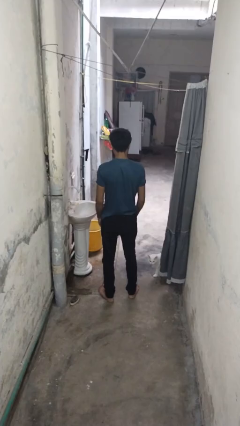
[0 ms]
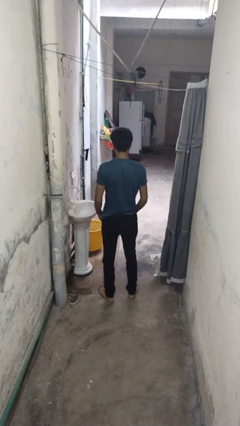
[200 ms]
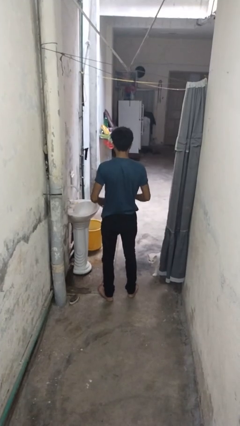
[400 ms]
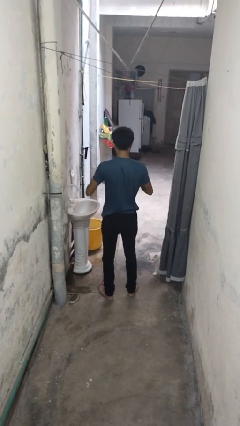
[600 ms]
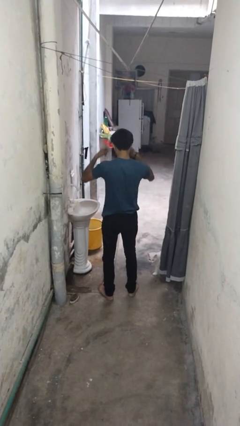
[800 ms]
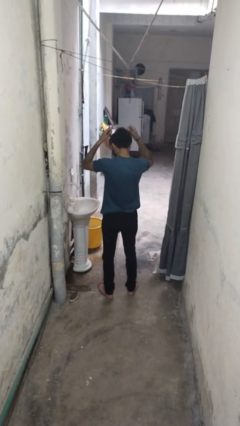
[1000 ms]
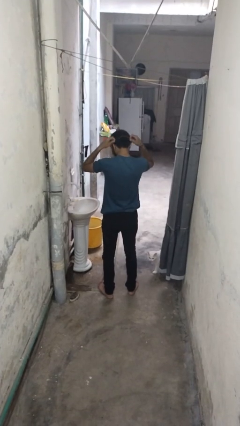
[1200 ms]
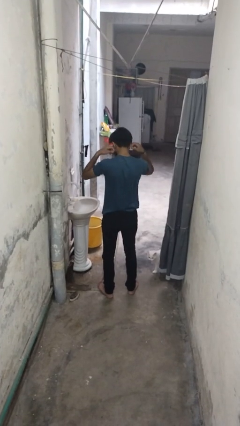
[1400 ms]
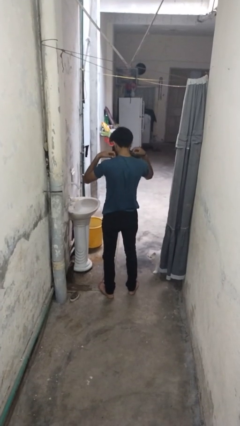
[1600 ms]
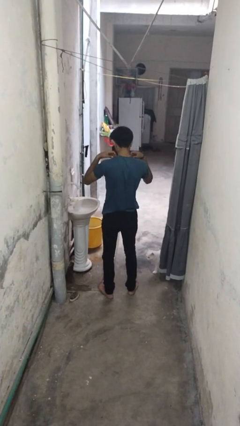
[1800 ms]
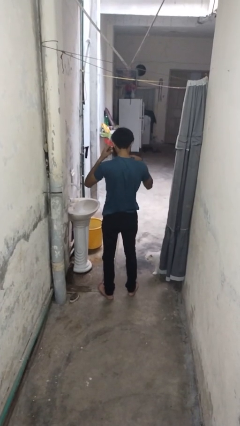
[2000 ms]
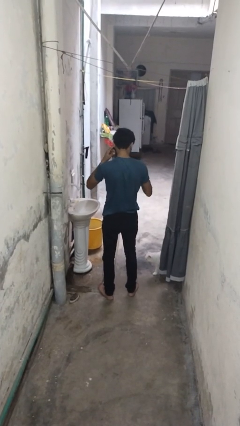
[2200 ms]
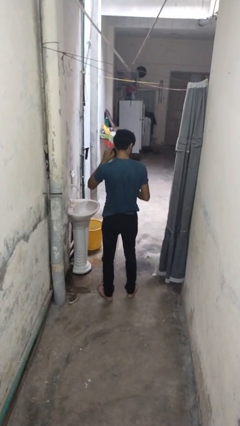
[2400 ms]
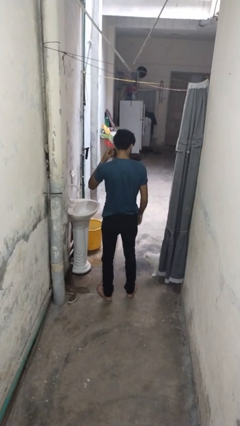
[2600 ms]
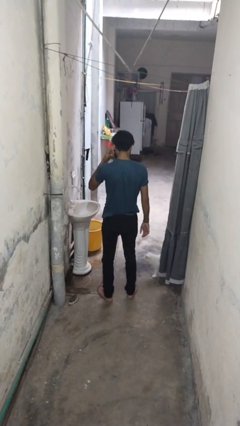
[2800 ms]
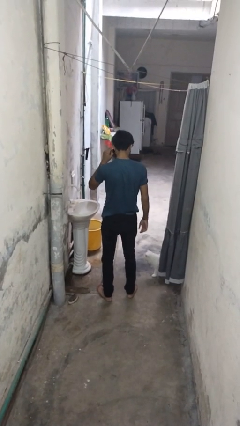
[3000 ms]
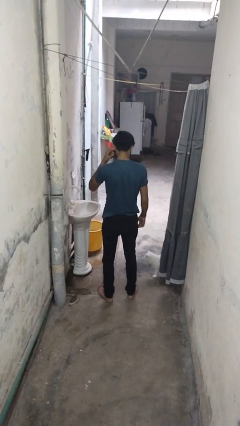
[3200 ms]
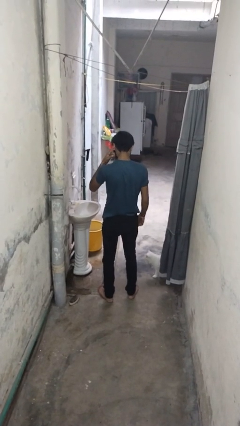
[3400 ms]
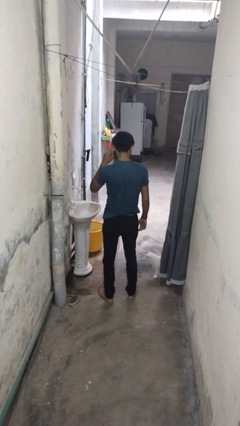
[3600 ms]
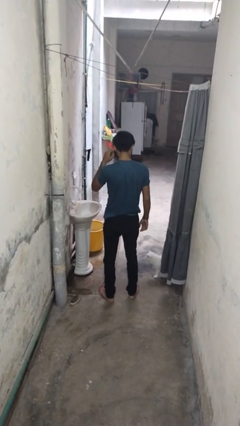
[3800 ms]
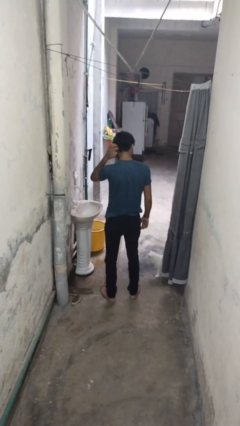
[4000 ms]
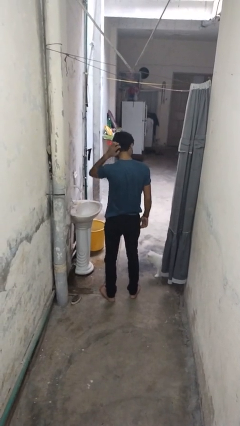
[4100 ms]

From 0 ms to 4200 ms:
person puts on necklace

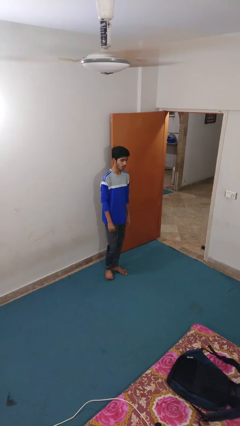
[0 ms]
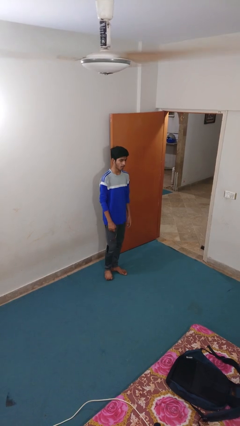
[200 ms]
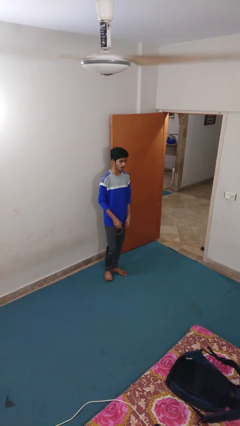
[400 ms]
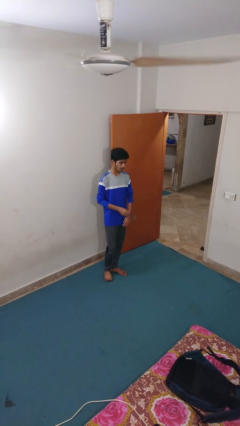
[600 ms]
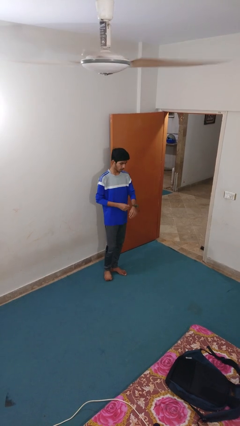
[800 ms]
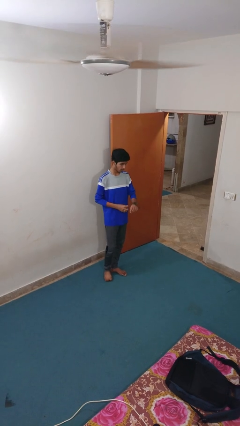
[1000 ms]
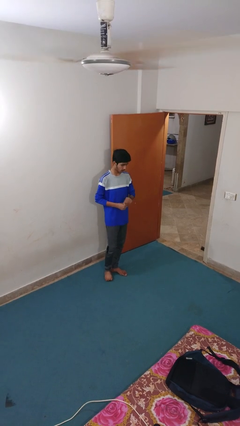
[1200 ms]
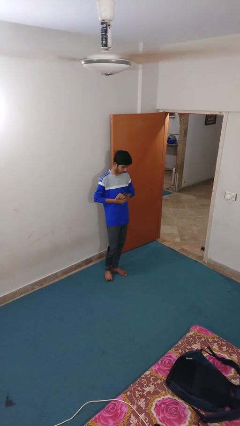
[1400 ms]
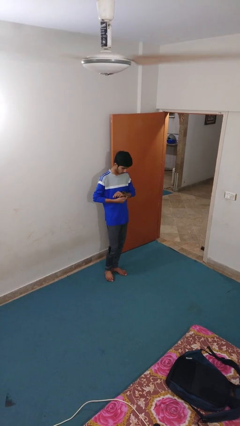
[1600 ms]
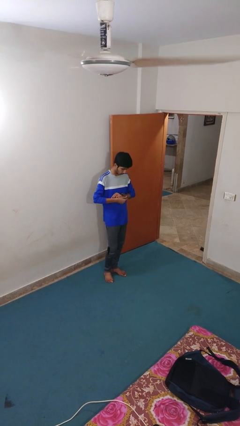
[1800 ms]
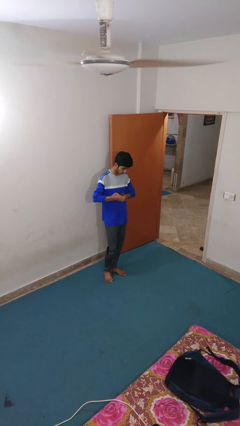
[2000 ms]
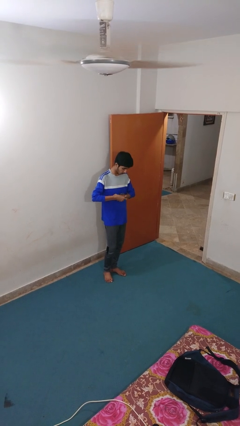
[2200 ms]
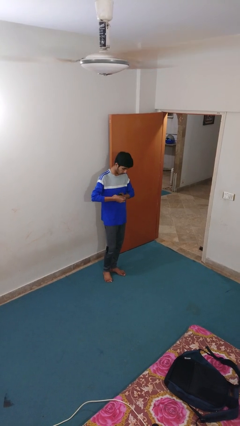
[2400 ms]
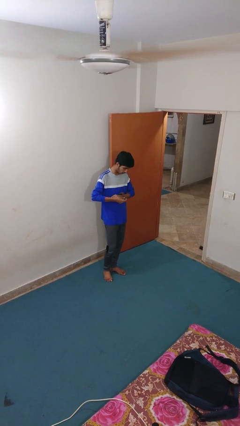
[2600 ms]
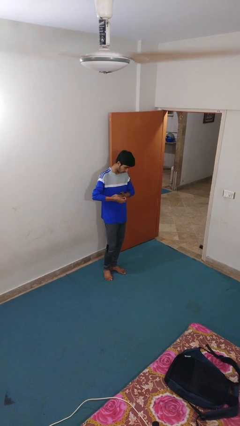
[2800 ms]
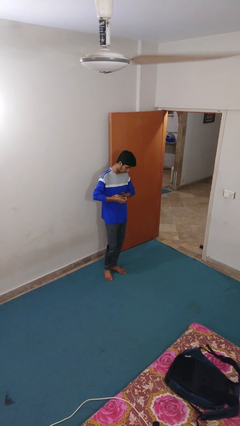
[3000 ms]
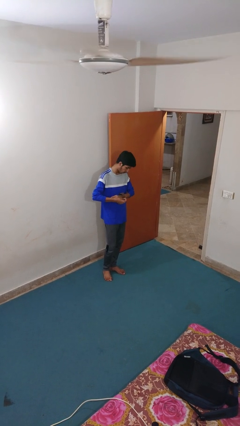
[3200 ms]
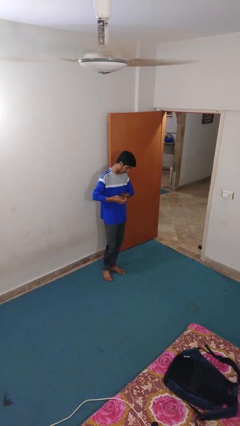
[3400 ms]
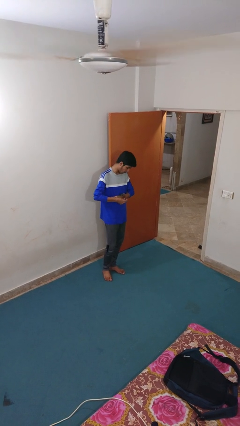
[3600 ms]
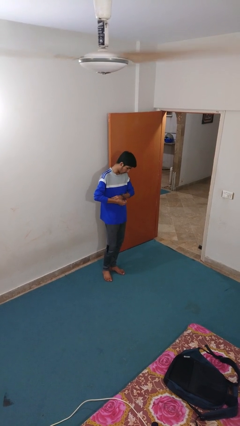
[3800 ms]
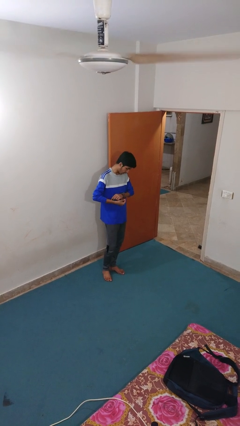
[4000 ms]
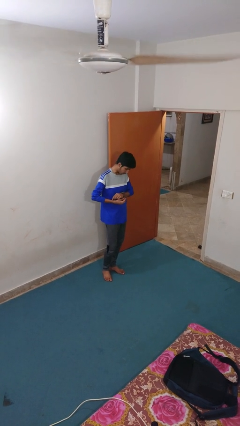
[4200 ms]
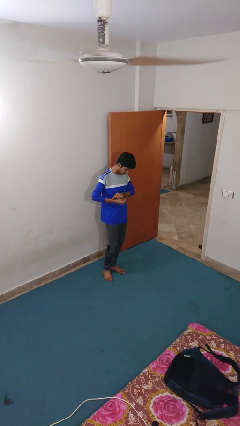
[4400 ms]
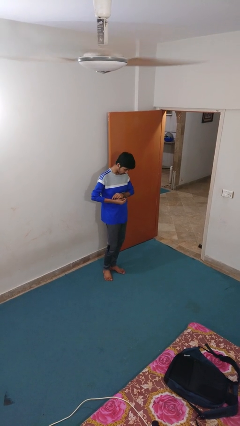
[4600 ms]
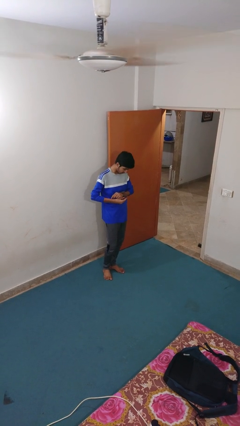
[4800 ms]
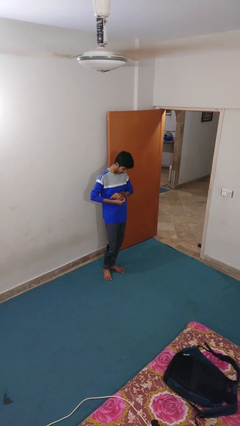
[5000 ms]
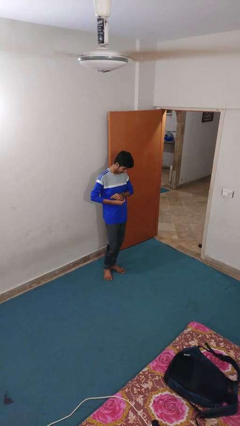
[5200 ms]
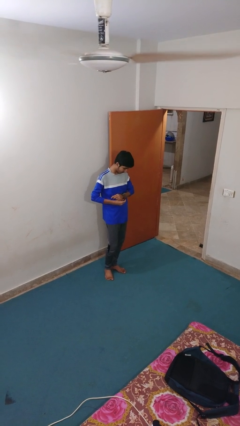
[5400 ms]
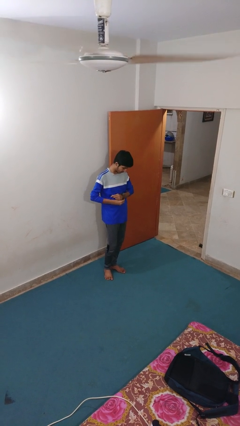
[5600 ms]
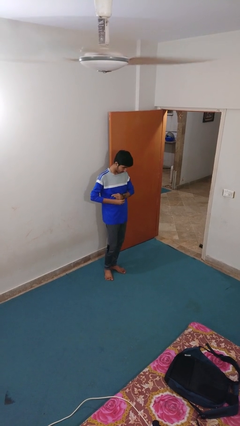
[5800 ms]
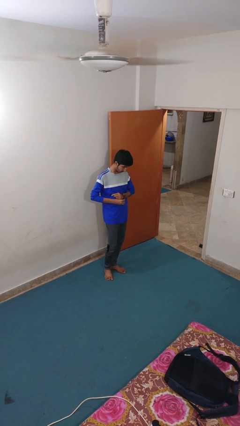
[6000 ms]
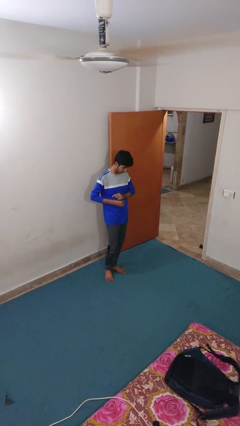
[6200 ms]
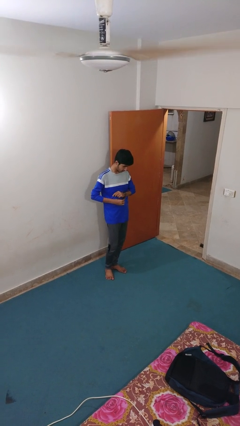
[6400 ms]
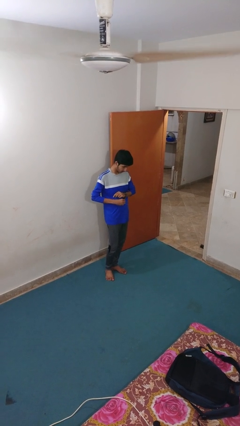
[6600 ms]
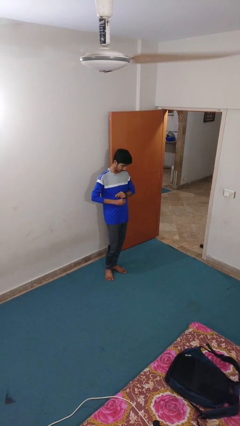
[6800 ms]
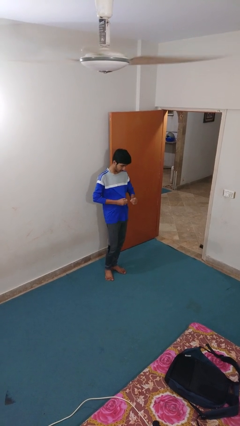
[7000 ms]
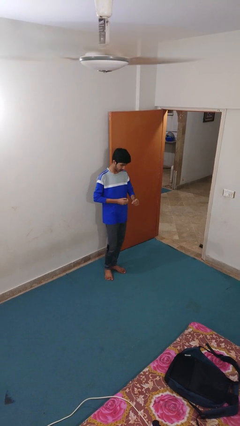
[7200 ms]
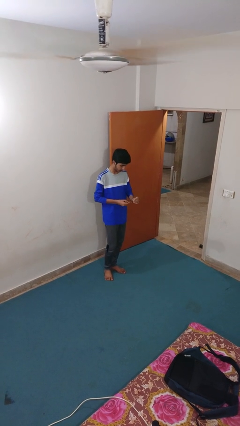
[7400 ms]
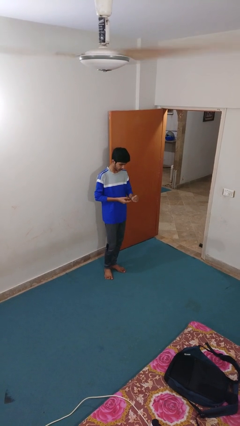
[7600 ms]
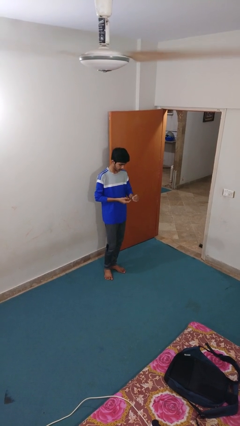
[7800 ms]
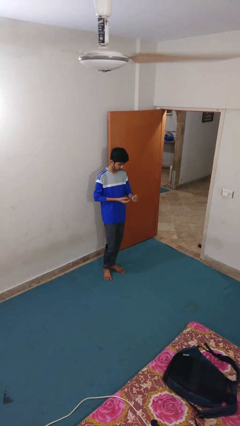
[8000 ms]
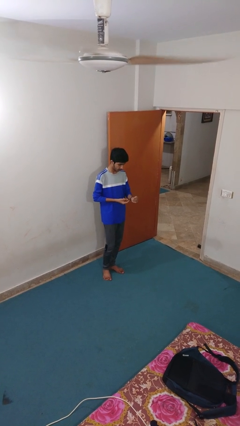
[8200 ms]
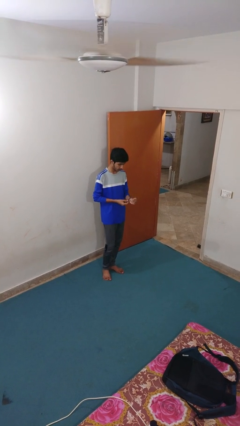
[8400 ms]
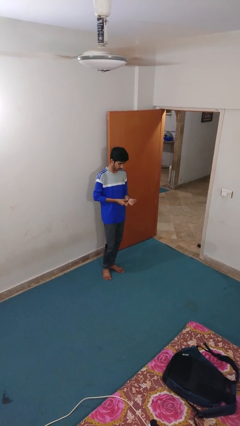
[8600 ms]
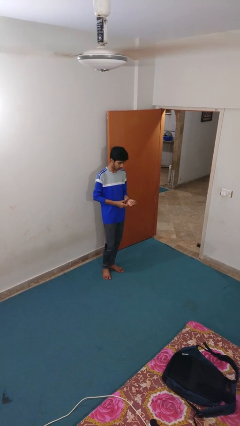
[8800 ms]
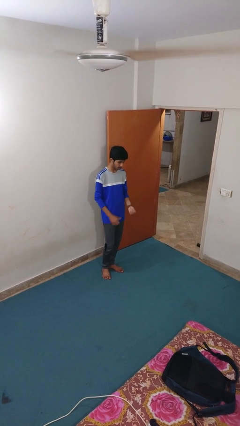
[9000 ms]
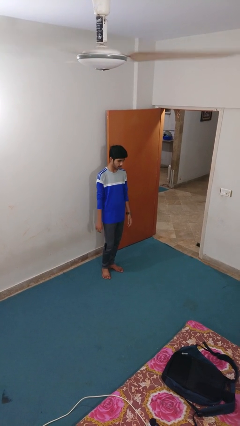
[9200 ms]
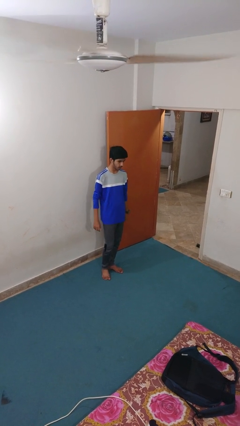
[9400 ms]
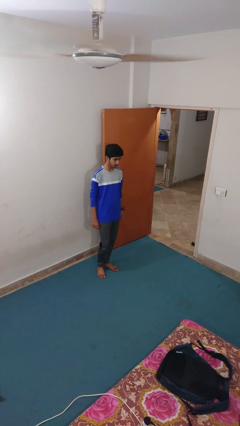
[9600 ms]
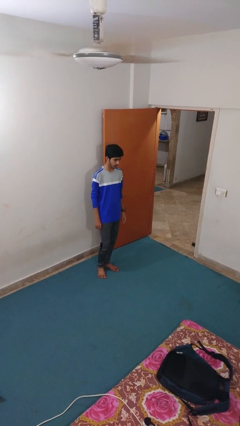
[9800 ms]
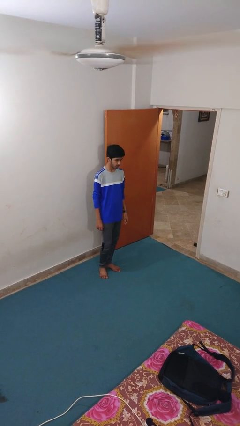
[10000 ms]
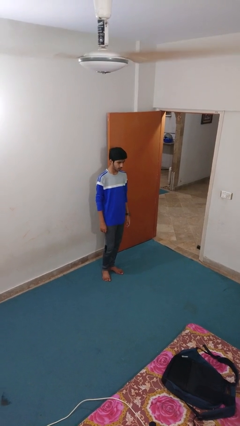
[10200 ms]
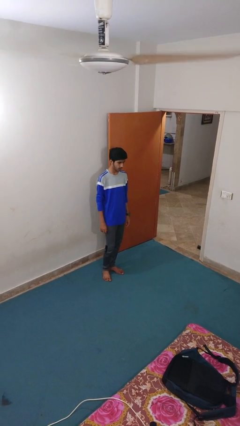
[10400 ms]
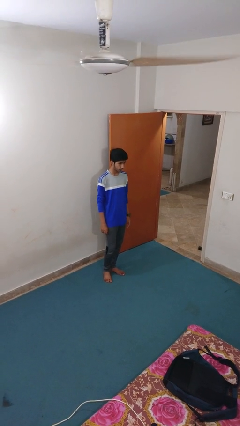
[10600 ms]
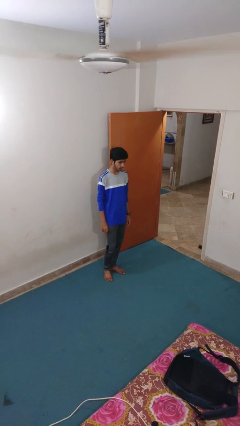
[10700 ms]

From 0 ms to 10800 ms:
person puts on wristwatch

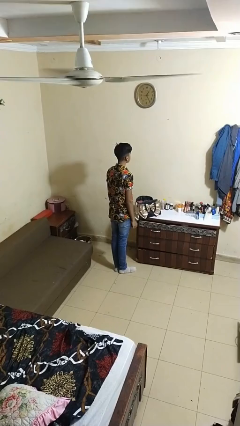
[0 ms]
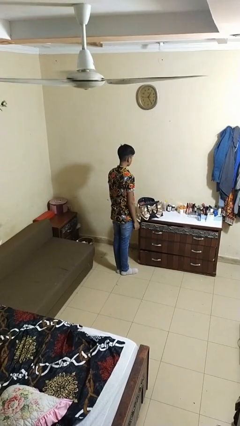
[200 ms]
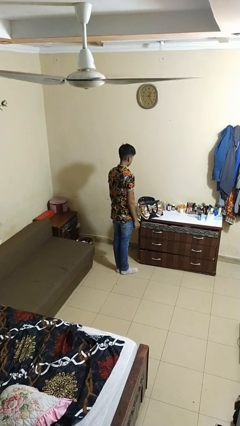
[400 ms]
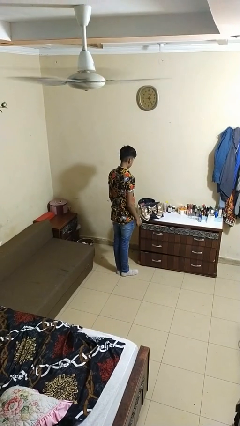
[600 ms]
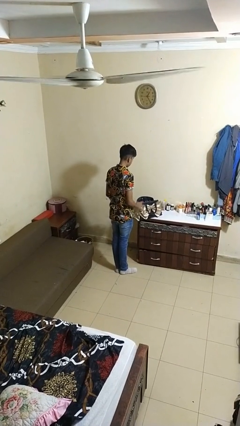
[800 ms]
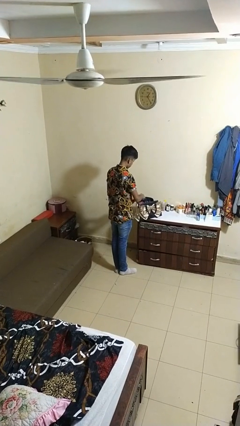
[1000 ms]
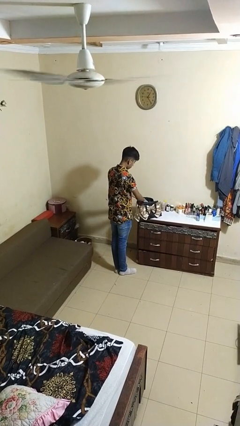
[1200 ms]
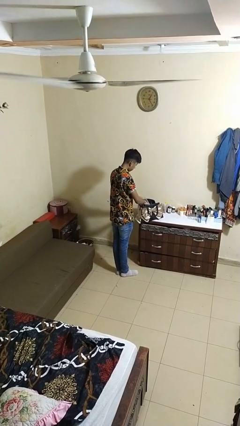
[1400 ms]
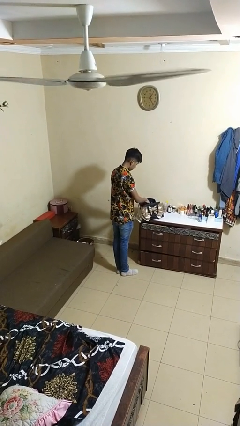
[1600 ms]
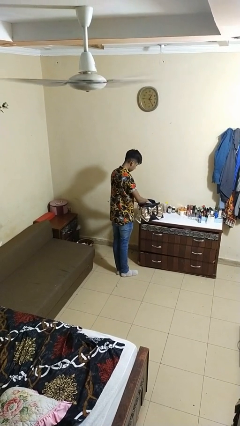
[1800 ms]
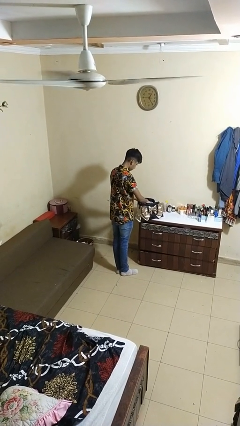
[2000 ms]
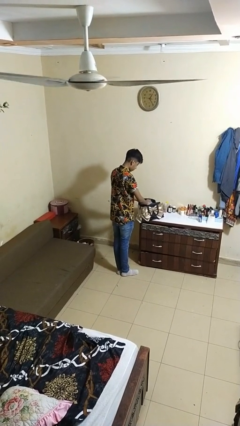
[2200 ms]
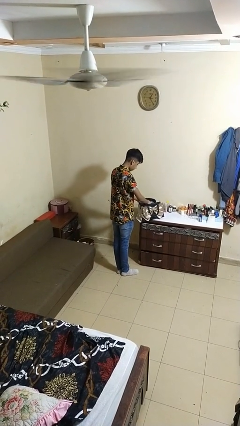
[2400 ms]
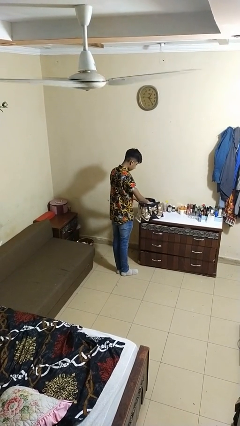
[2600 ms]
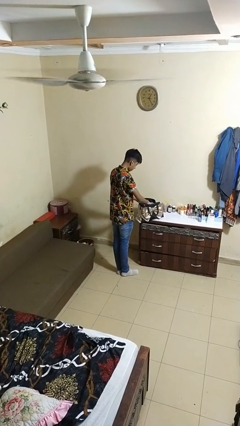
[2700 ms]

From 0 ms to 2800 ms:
person searches in purse

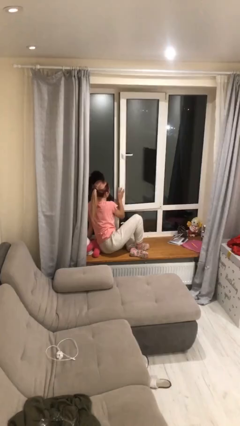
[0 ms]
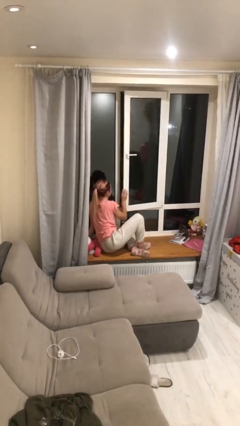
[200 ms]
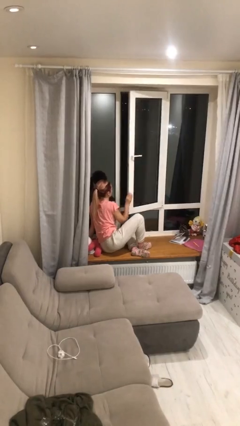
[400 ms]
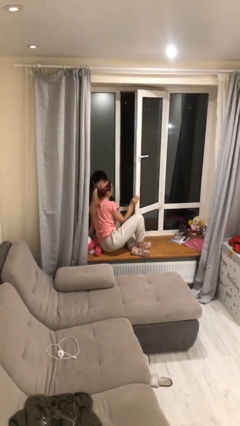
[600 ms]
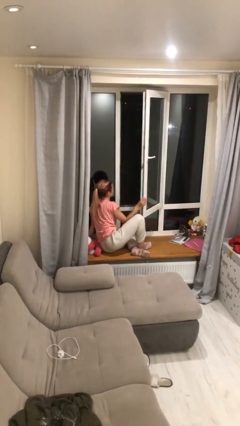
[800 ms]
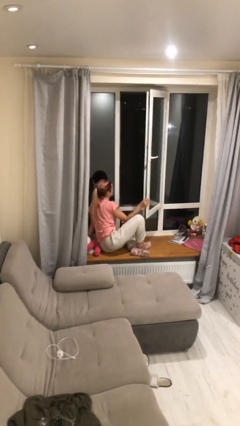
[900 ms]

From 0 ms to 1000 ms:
person opens home window
